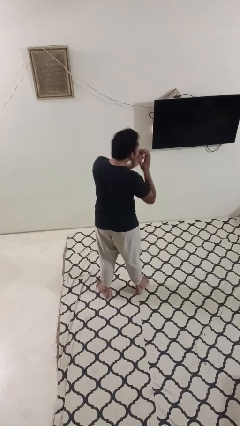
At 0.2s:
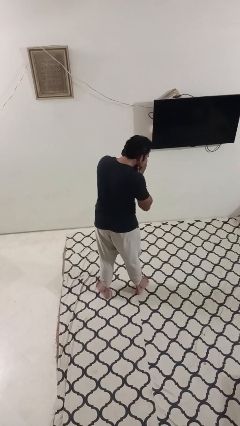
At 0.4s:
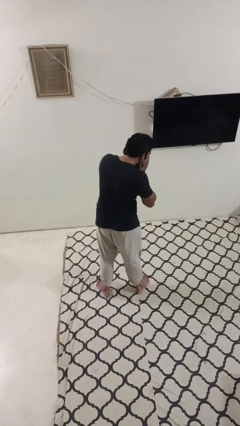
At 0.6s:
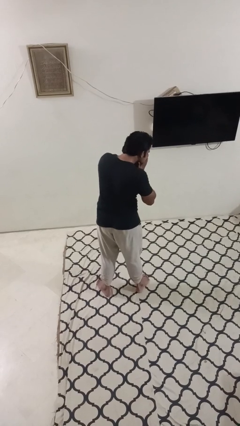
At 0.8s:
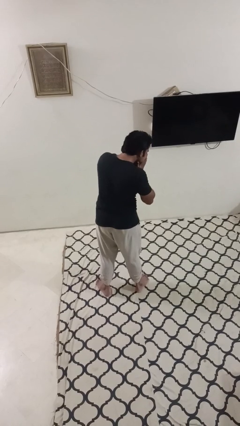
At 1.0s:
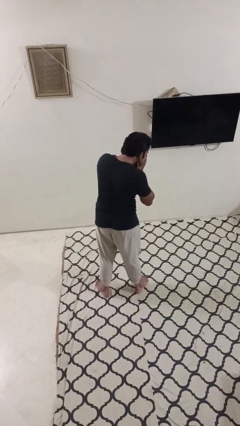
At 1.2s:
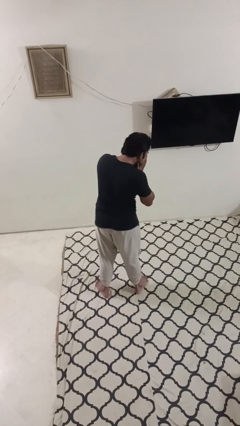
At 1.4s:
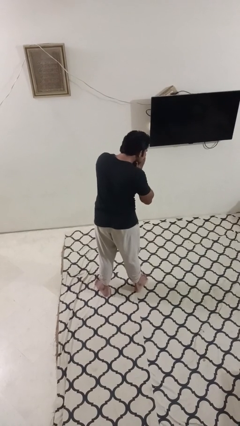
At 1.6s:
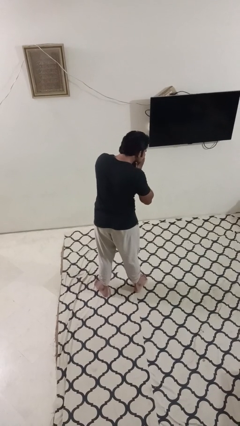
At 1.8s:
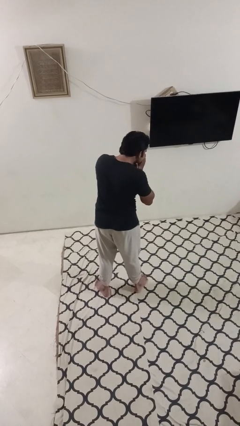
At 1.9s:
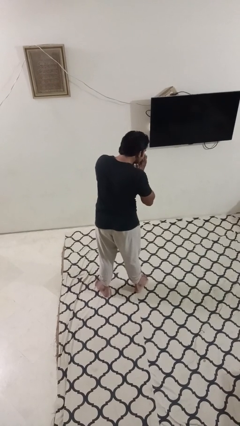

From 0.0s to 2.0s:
person sneezes into hand

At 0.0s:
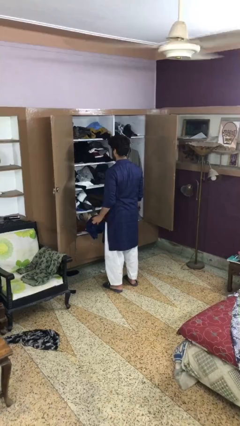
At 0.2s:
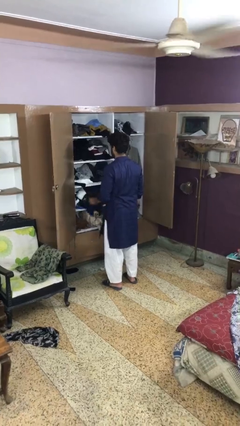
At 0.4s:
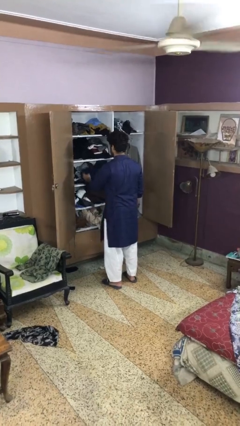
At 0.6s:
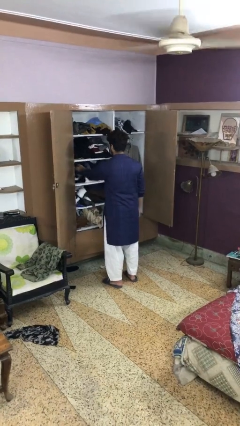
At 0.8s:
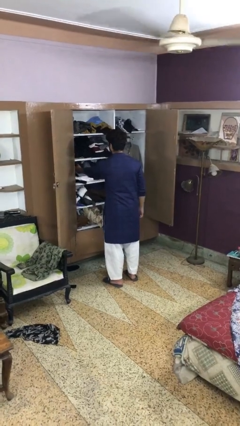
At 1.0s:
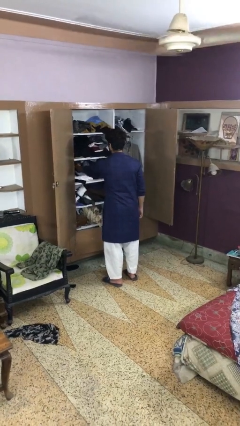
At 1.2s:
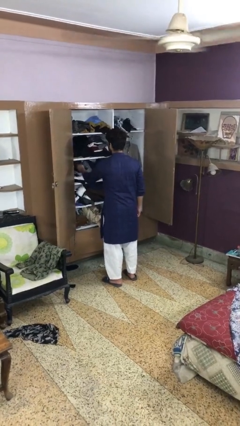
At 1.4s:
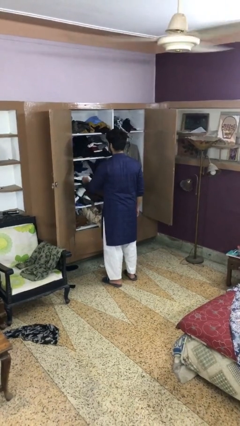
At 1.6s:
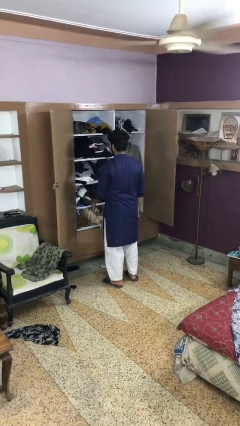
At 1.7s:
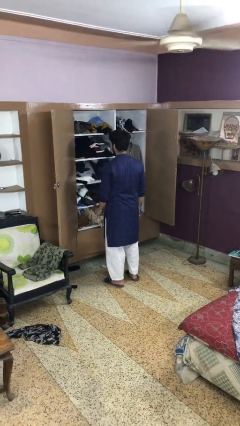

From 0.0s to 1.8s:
person puts clothes into dresser

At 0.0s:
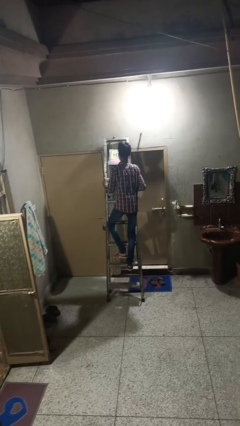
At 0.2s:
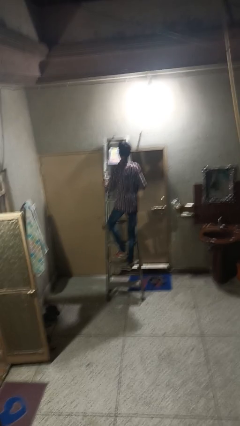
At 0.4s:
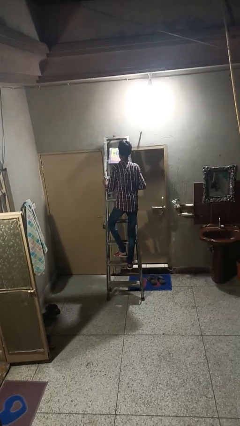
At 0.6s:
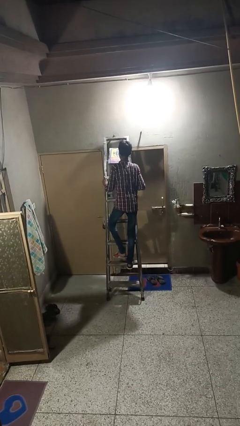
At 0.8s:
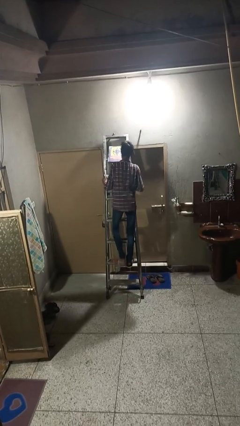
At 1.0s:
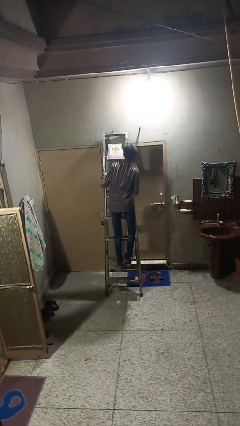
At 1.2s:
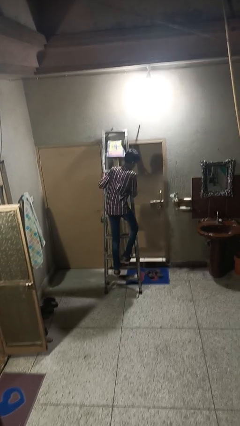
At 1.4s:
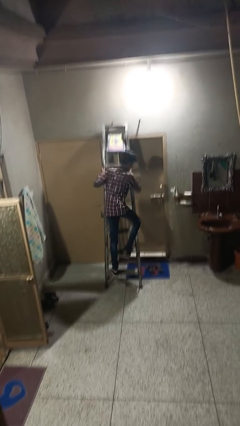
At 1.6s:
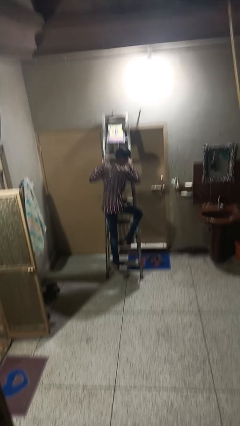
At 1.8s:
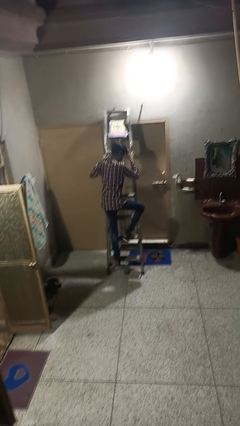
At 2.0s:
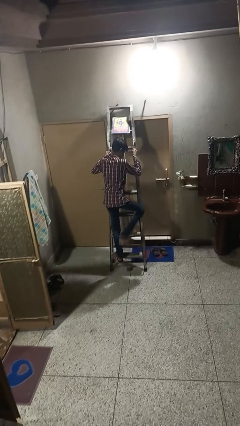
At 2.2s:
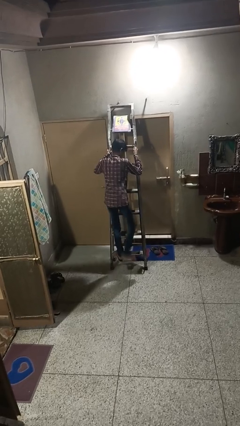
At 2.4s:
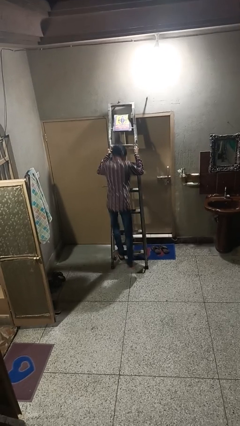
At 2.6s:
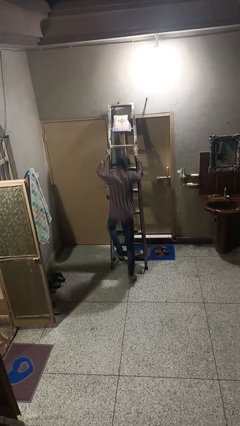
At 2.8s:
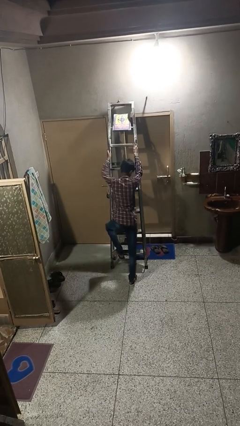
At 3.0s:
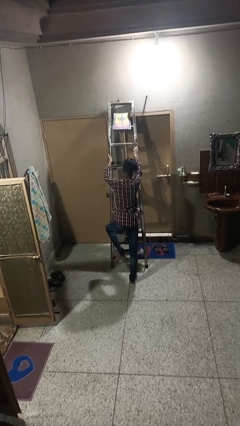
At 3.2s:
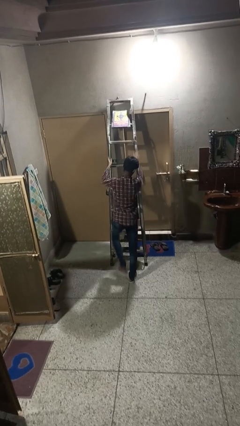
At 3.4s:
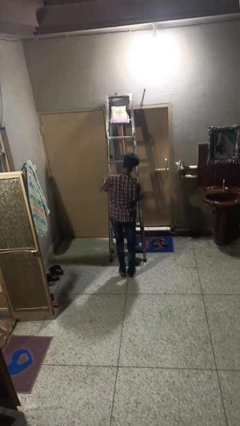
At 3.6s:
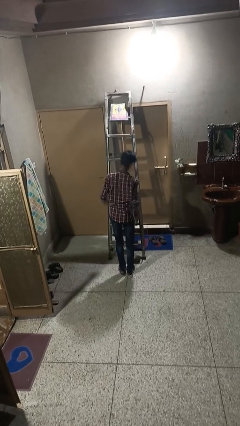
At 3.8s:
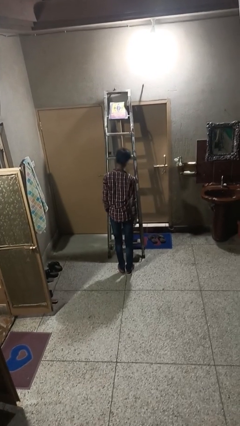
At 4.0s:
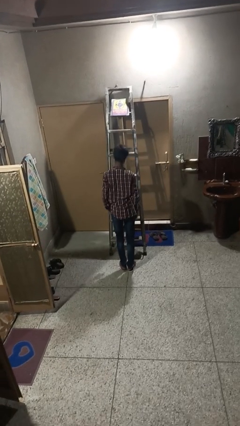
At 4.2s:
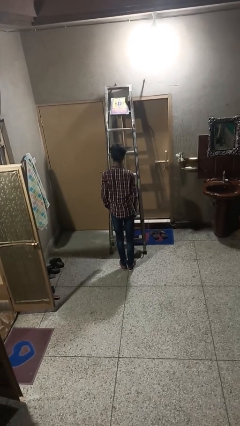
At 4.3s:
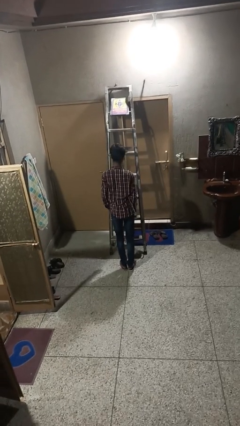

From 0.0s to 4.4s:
person climbs down ladder

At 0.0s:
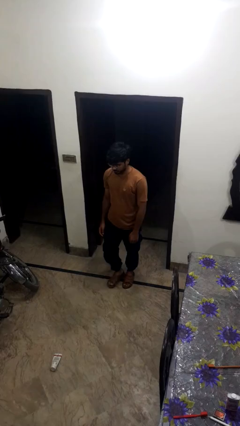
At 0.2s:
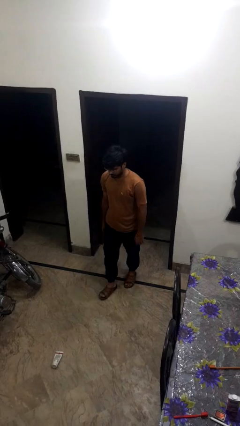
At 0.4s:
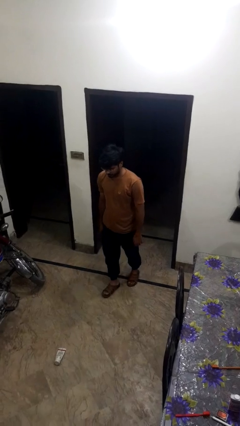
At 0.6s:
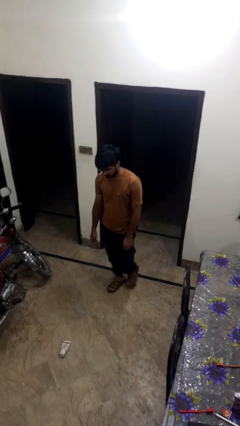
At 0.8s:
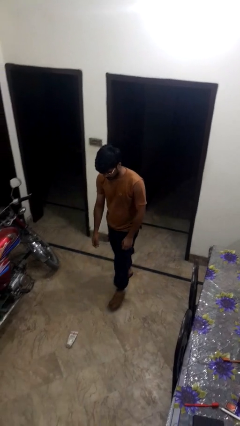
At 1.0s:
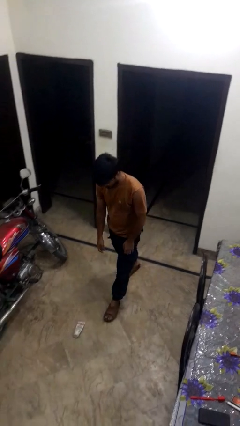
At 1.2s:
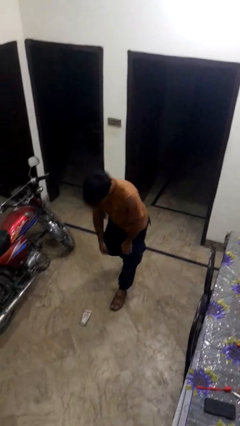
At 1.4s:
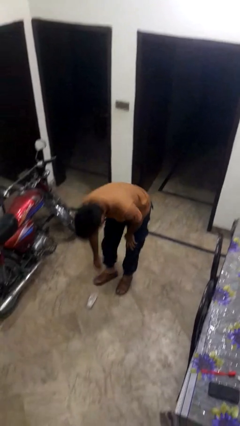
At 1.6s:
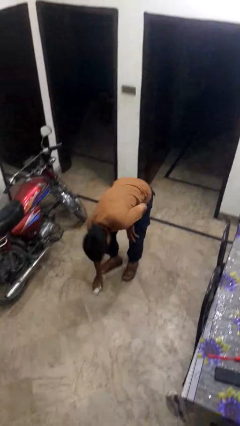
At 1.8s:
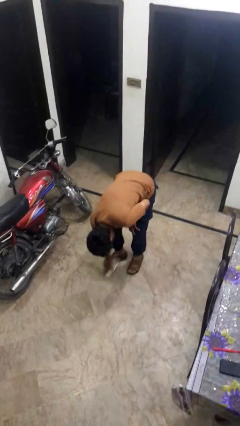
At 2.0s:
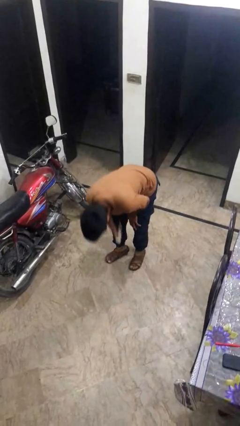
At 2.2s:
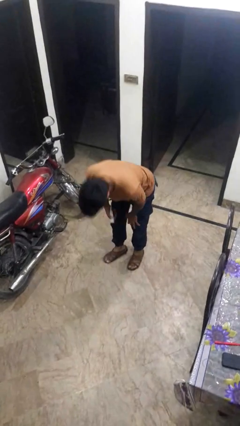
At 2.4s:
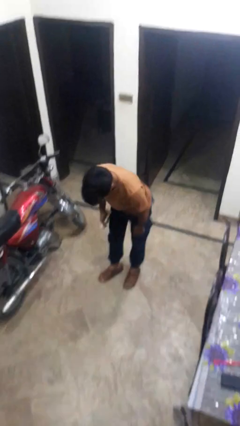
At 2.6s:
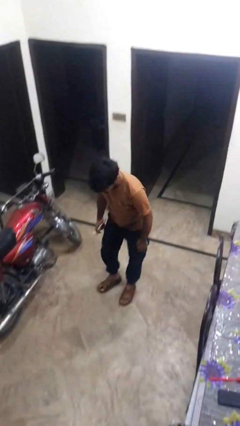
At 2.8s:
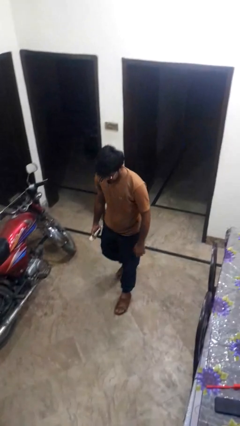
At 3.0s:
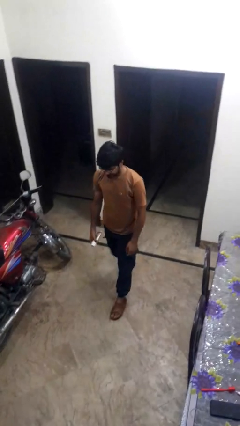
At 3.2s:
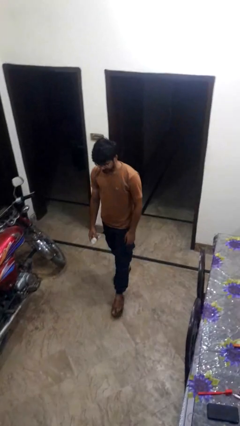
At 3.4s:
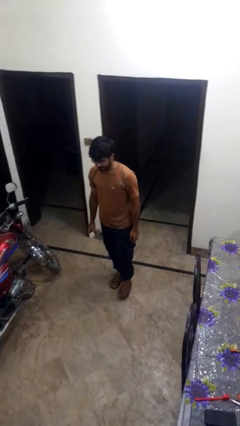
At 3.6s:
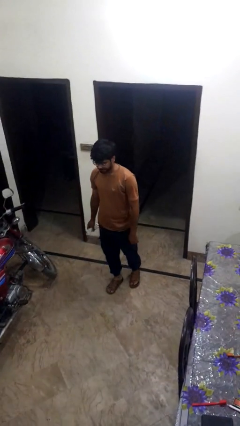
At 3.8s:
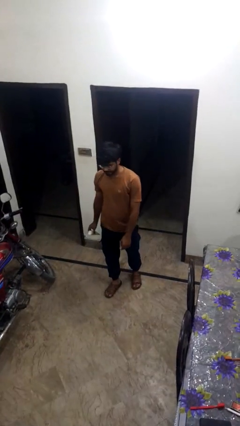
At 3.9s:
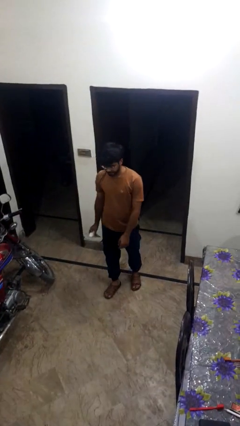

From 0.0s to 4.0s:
person picks up object from floor

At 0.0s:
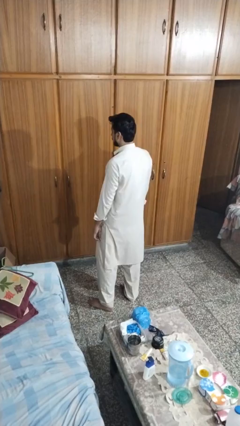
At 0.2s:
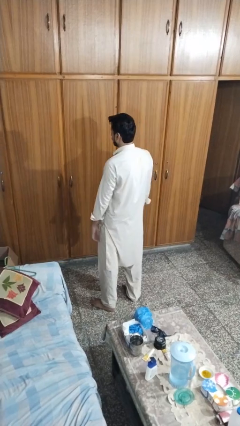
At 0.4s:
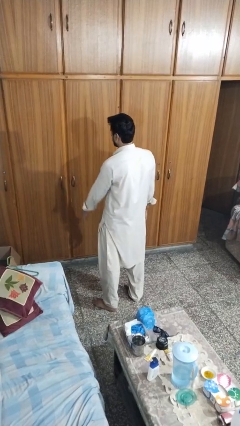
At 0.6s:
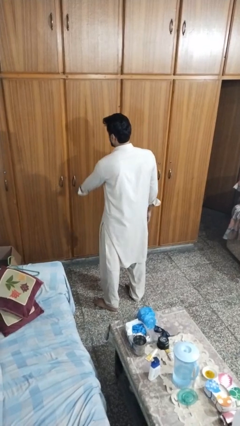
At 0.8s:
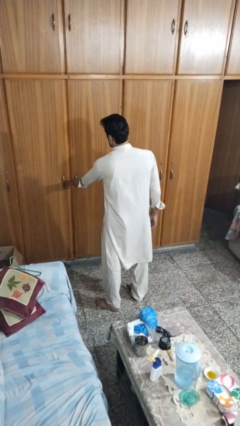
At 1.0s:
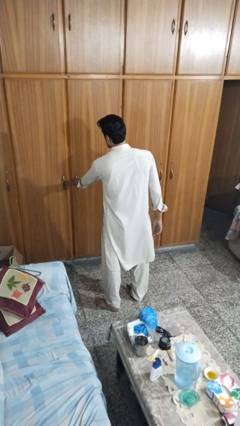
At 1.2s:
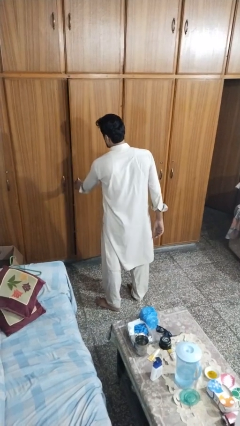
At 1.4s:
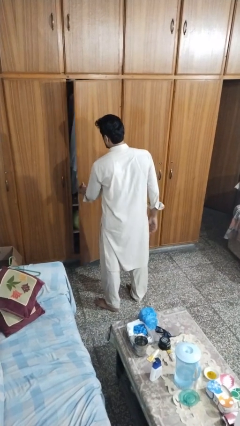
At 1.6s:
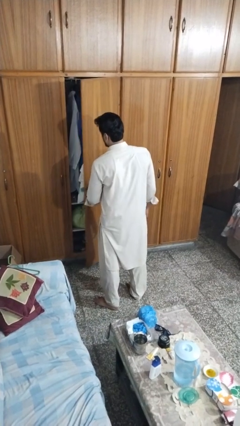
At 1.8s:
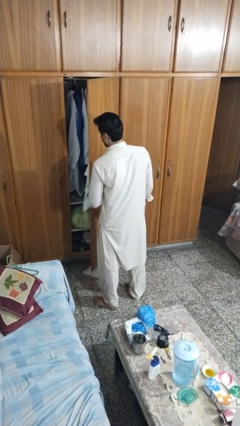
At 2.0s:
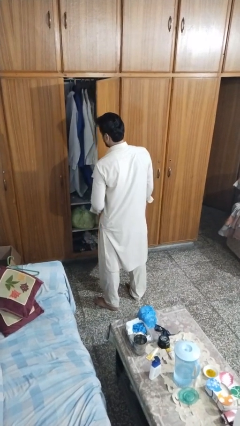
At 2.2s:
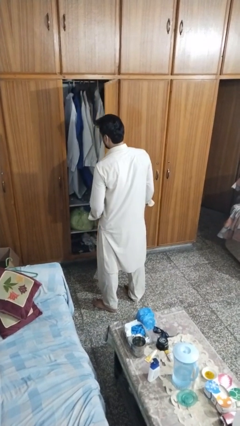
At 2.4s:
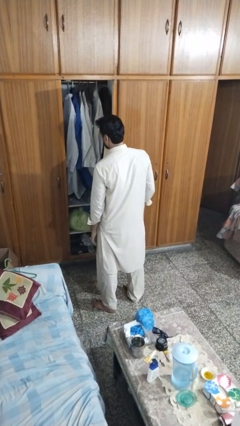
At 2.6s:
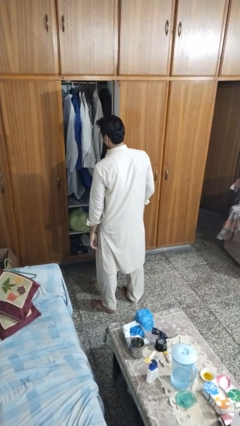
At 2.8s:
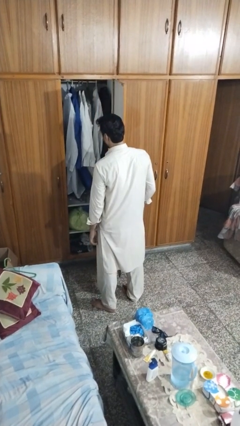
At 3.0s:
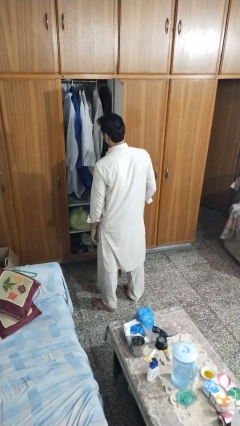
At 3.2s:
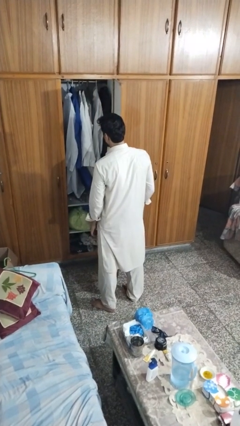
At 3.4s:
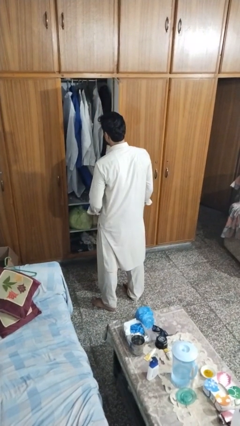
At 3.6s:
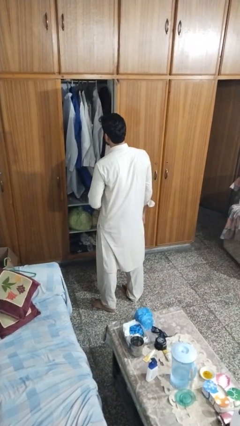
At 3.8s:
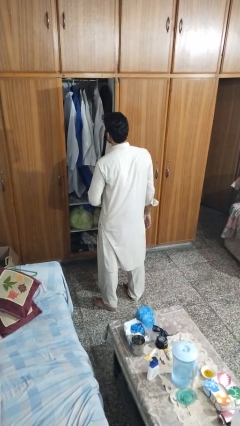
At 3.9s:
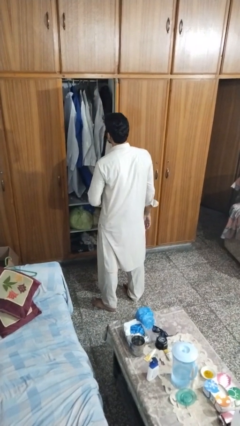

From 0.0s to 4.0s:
person opens closet door

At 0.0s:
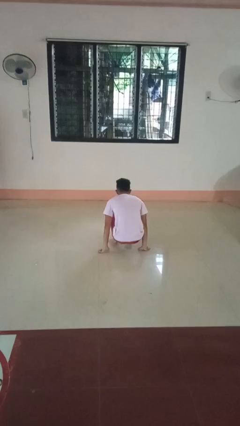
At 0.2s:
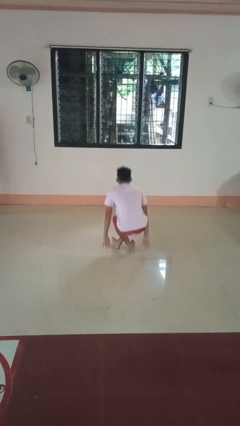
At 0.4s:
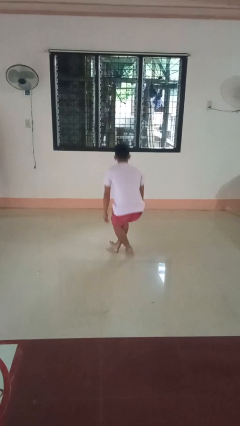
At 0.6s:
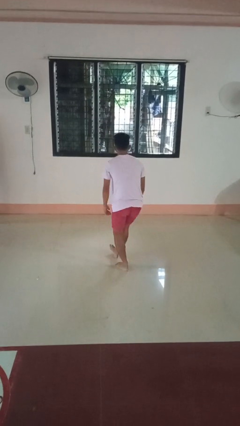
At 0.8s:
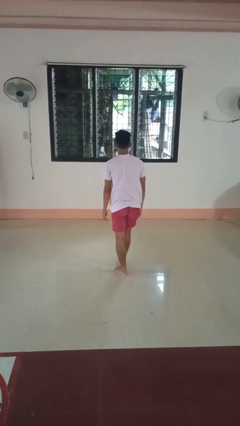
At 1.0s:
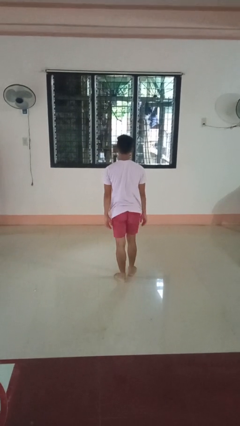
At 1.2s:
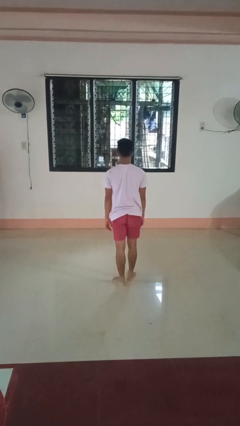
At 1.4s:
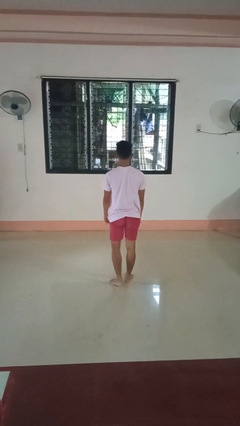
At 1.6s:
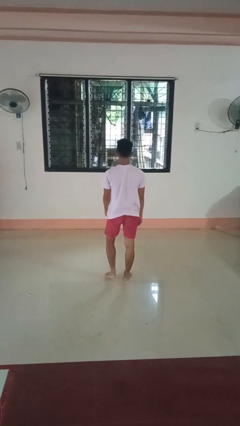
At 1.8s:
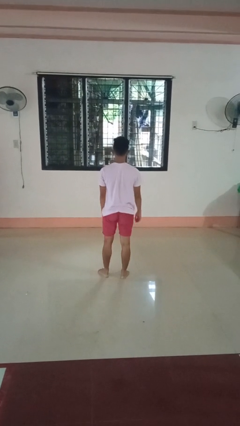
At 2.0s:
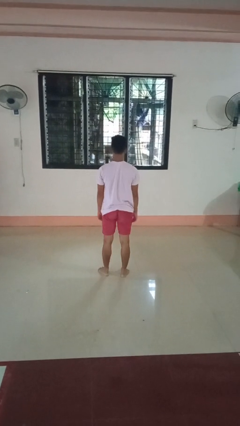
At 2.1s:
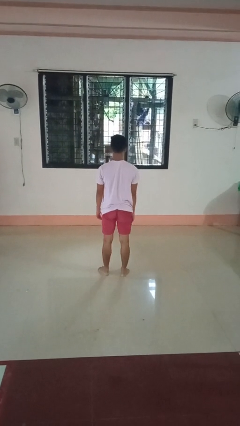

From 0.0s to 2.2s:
person stands up from floor
